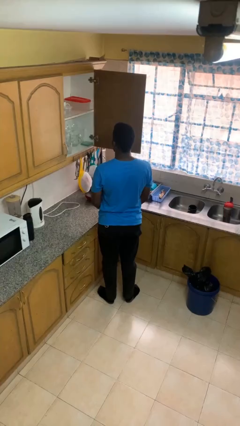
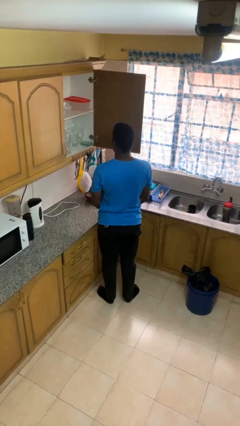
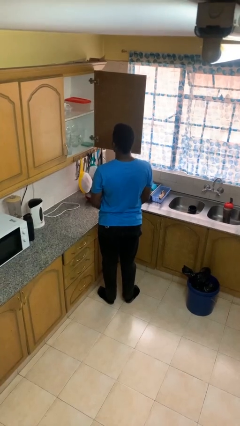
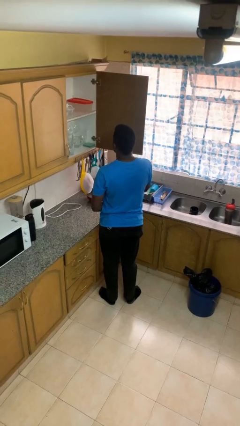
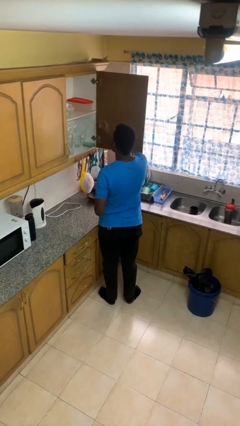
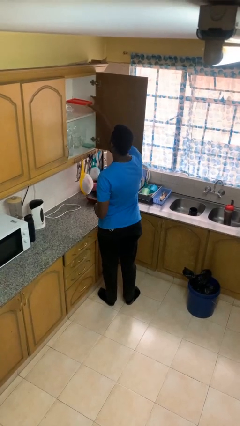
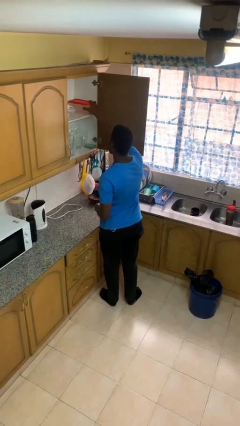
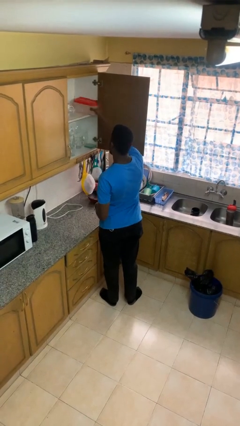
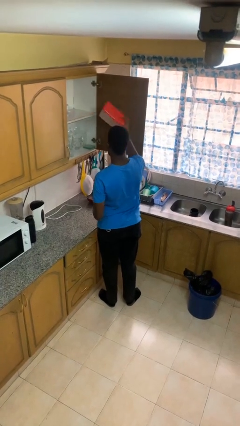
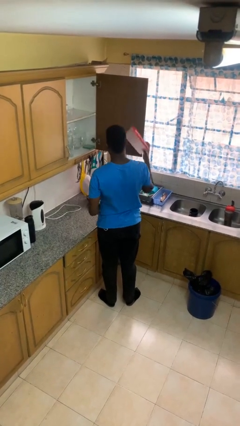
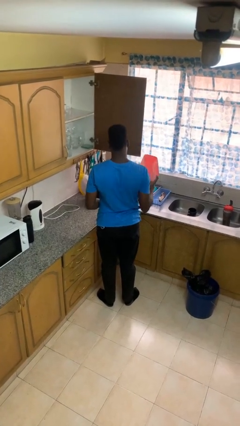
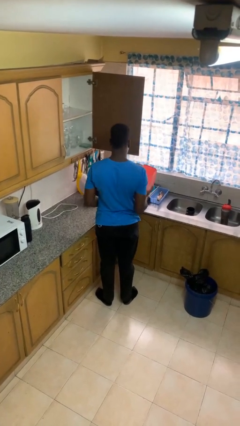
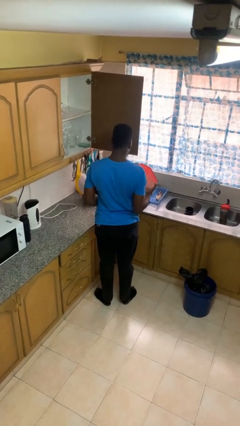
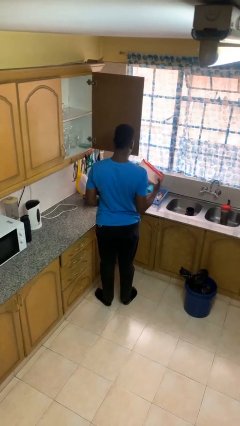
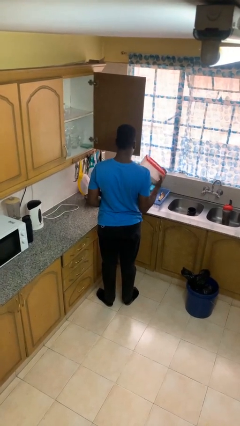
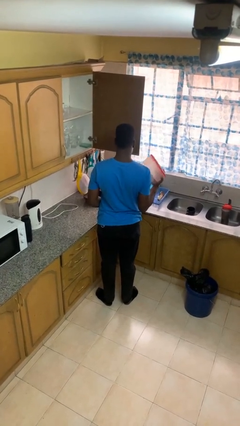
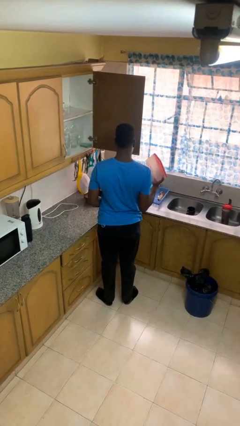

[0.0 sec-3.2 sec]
person picks up object from cabinet

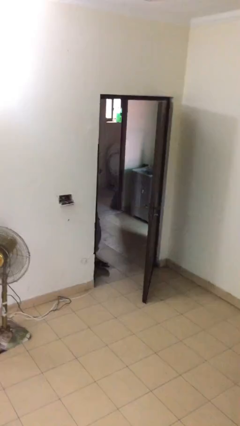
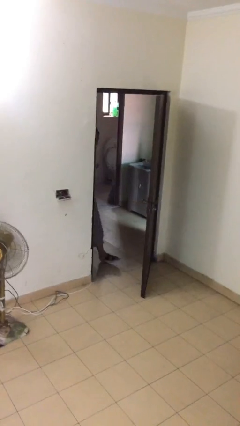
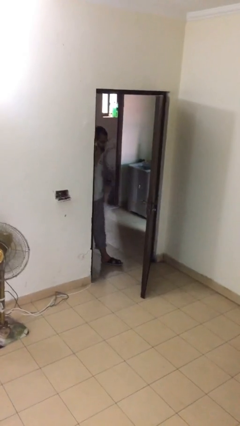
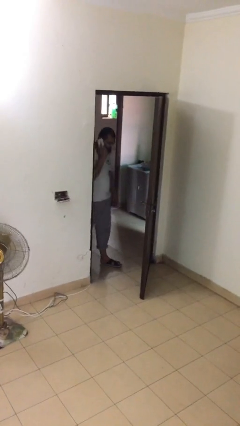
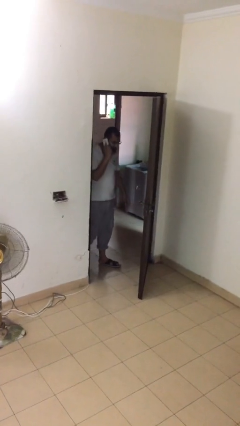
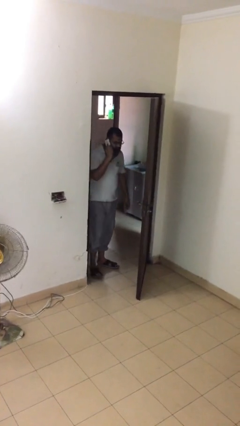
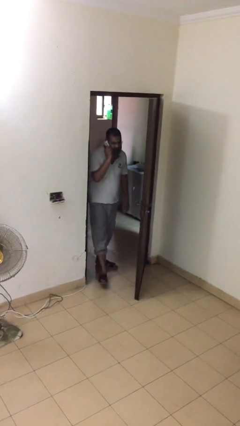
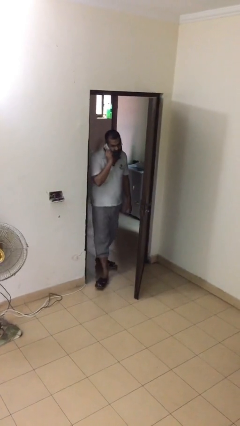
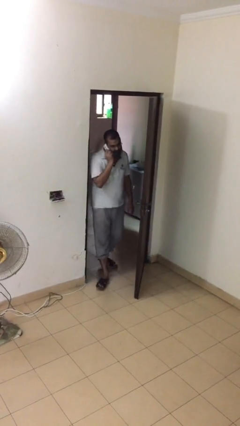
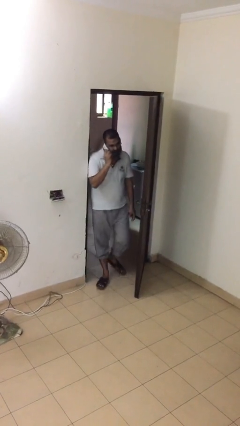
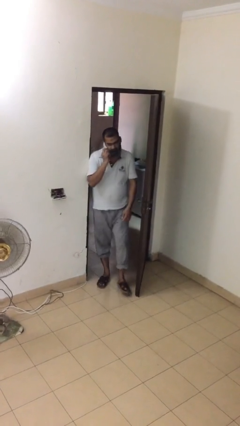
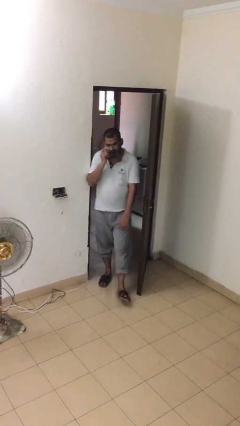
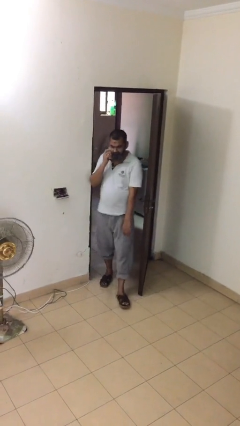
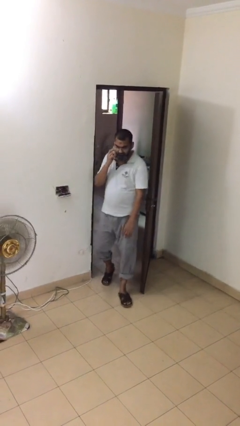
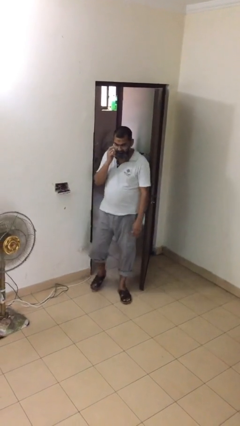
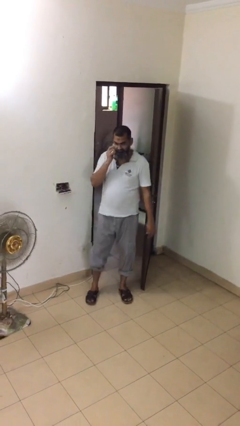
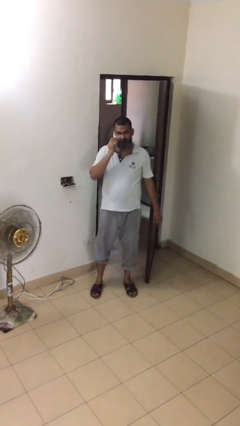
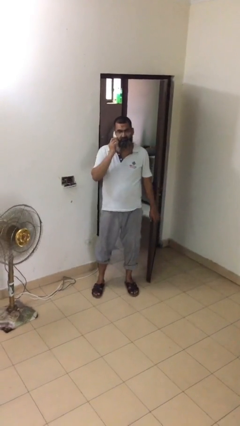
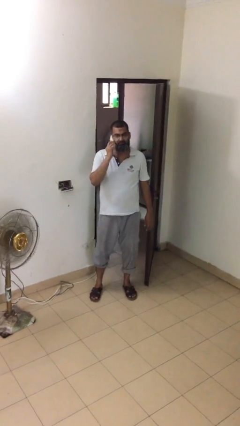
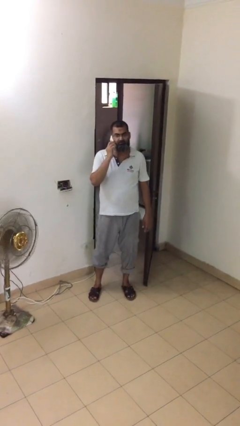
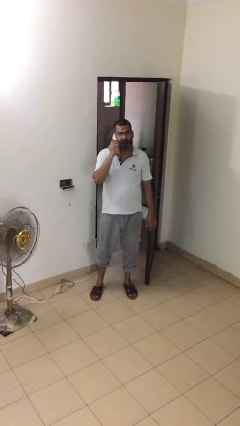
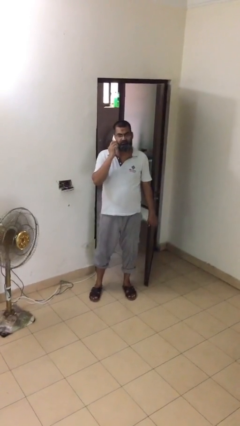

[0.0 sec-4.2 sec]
person enters scene through structure

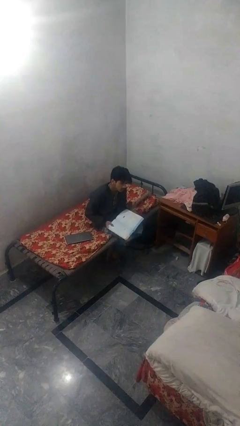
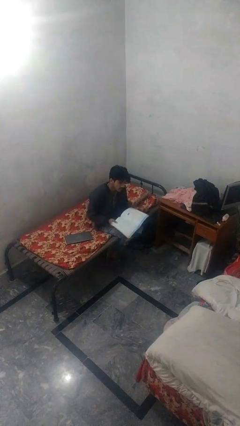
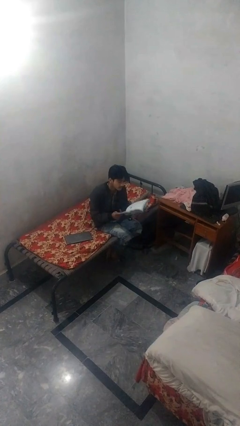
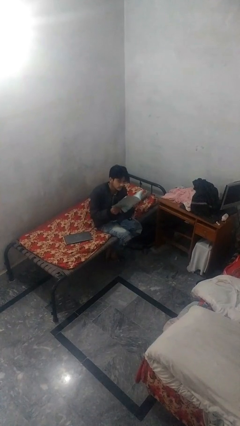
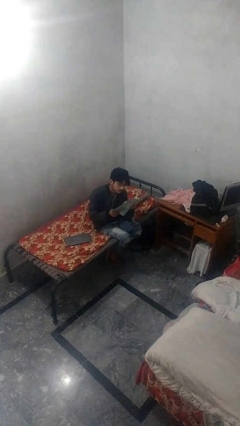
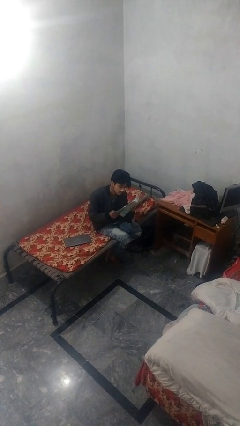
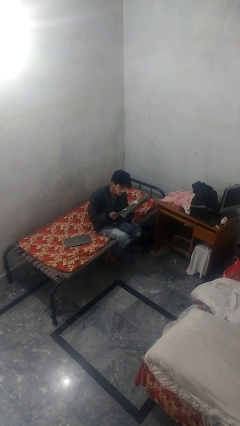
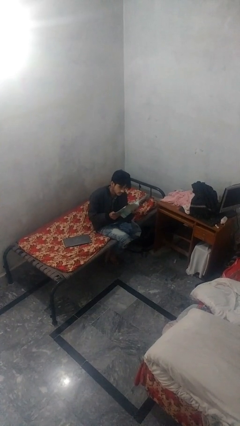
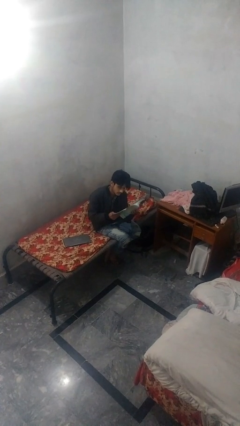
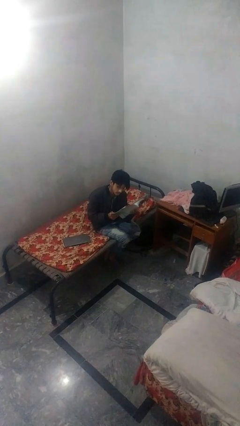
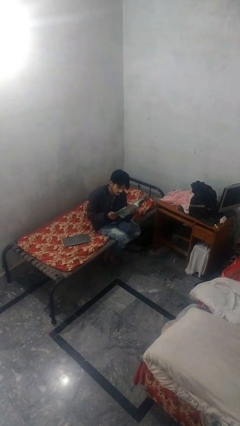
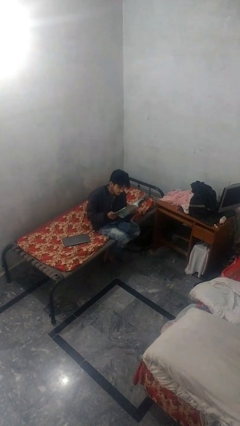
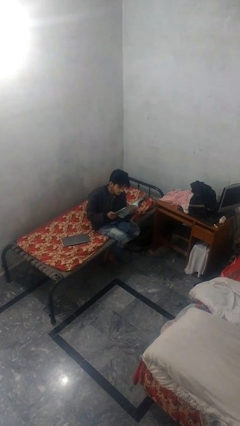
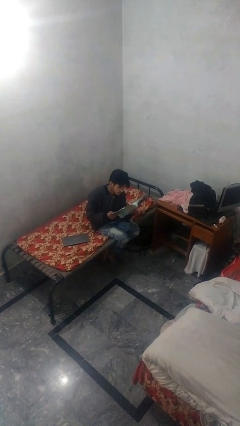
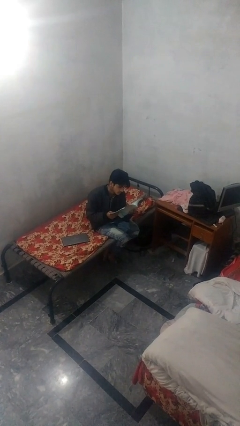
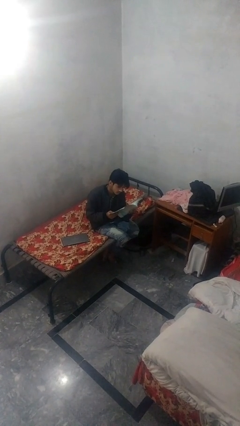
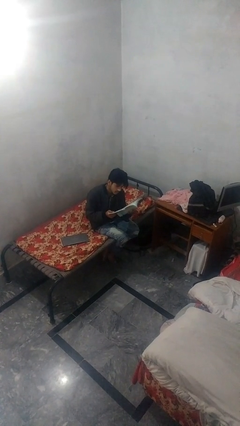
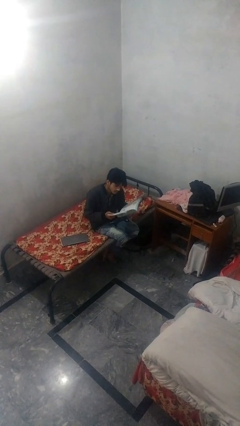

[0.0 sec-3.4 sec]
person reads document

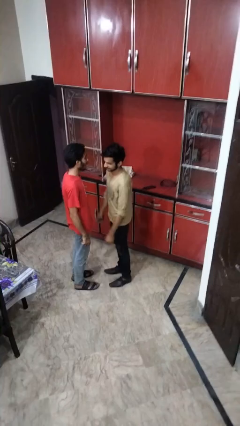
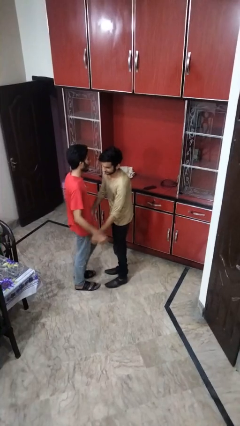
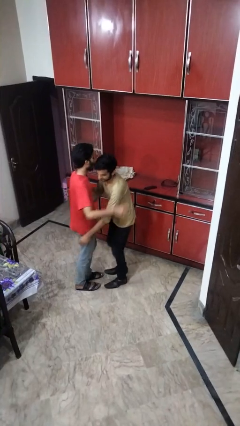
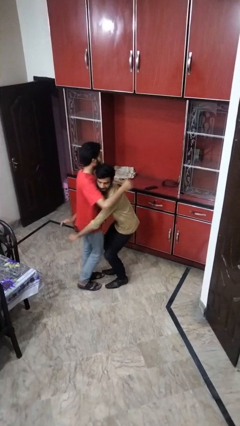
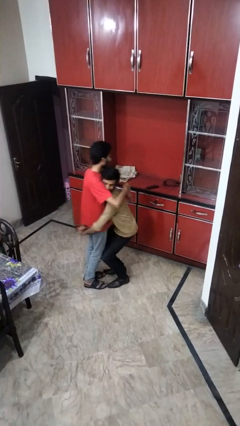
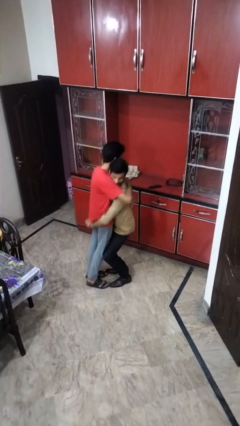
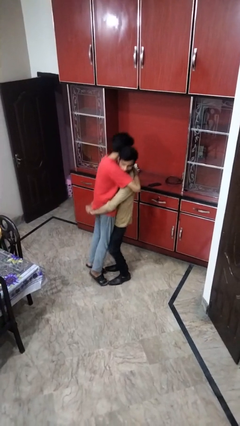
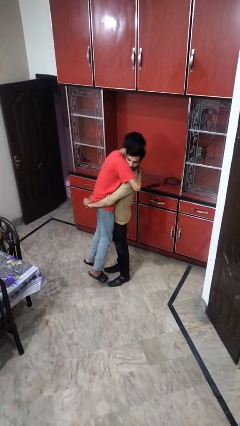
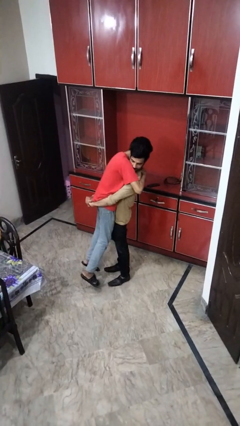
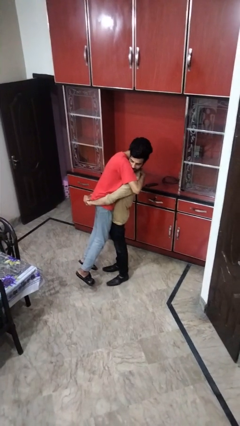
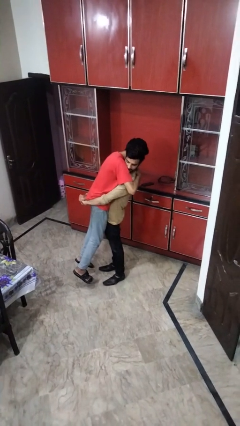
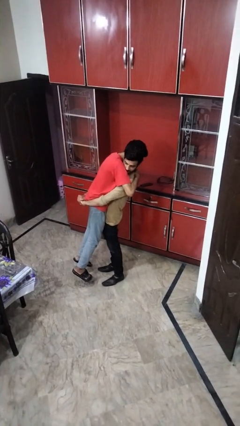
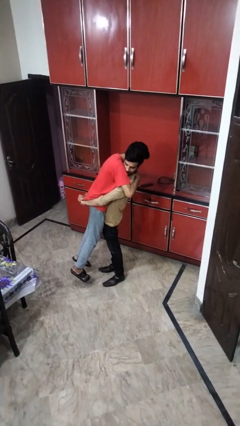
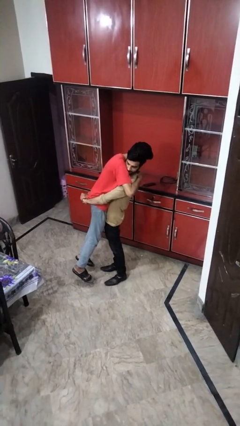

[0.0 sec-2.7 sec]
person picks up person

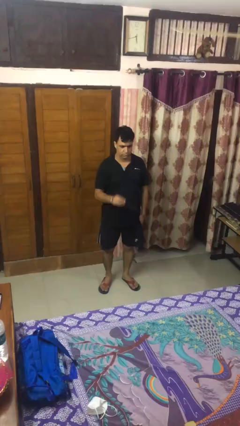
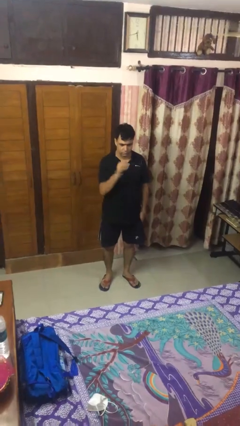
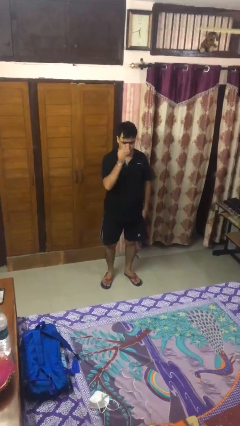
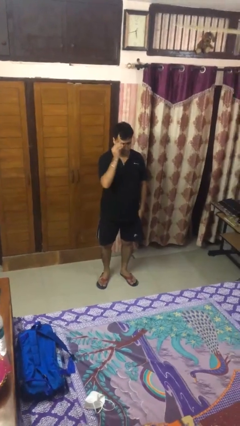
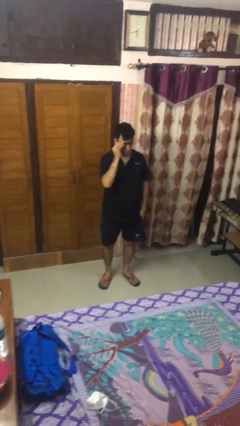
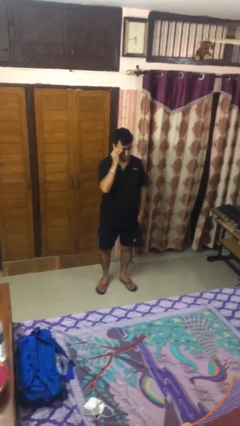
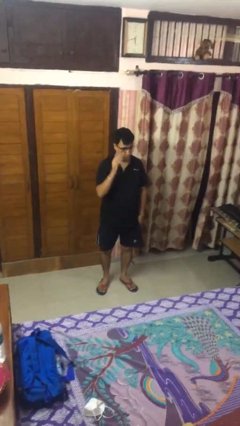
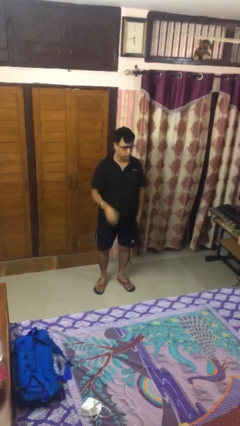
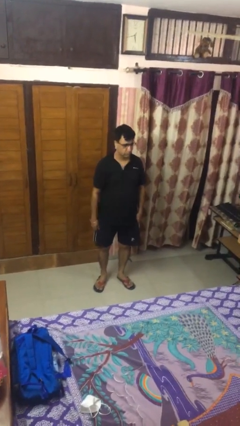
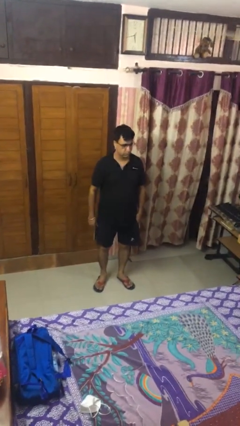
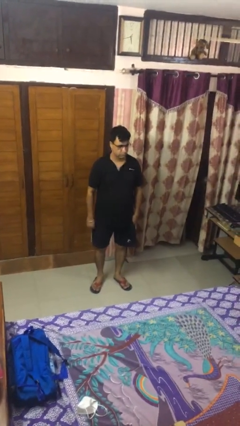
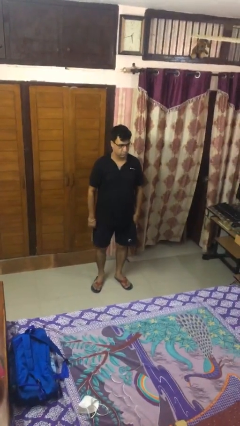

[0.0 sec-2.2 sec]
person puts on glasses

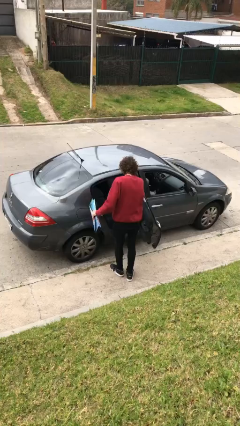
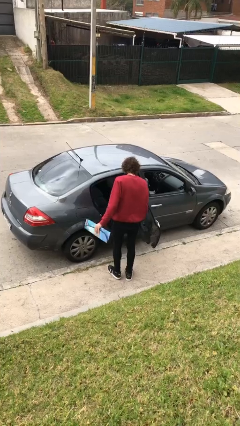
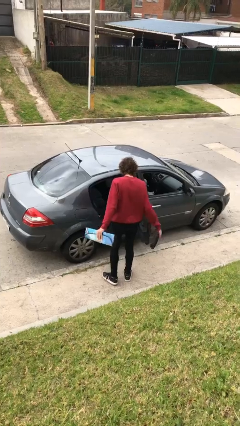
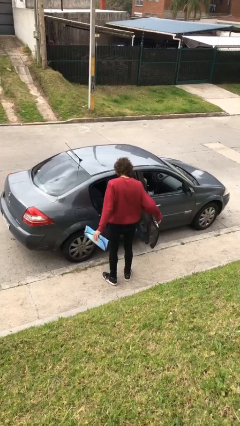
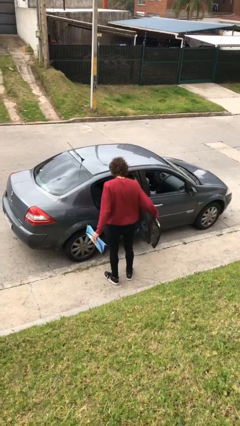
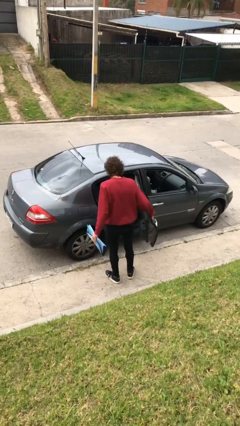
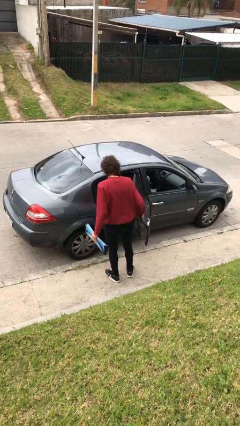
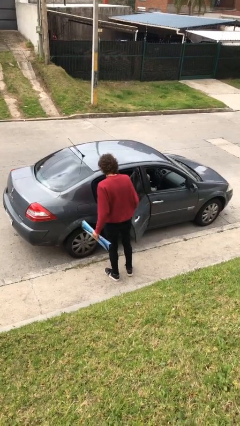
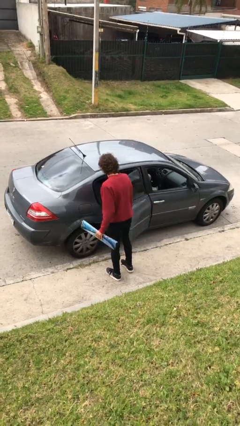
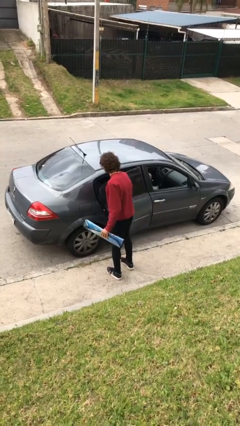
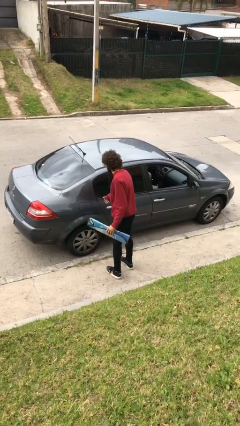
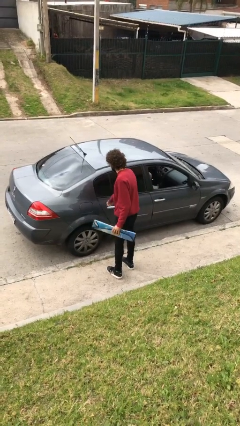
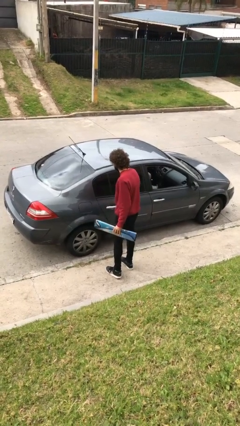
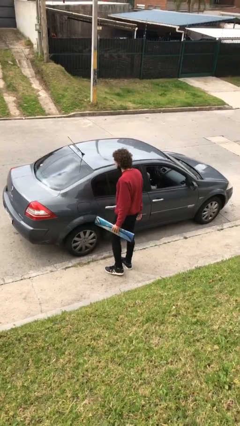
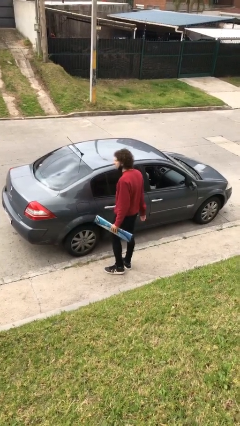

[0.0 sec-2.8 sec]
person closes car door
